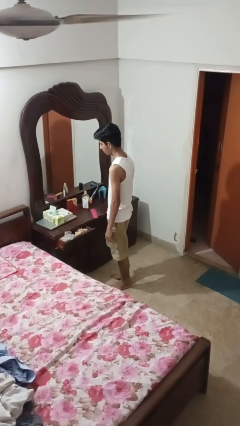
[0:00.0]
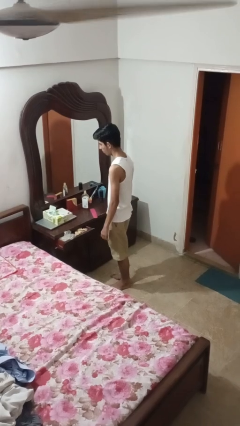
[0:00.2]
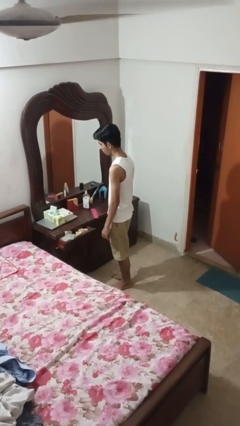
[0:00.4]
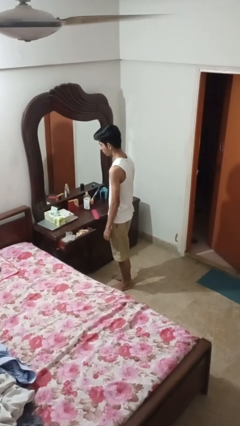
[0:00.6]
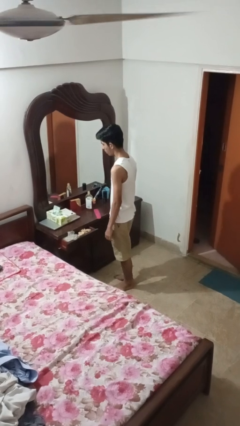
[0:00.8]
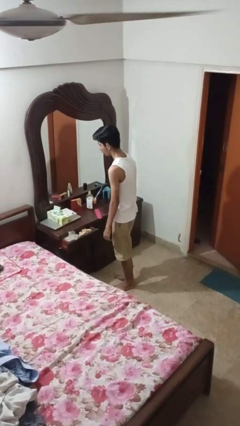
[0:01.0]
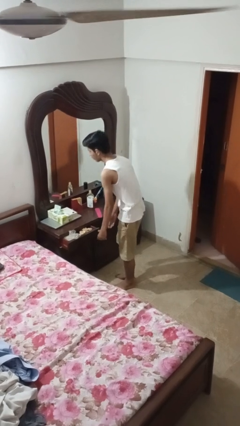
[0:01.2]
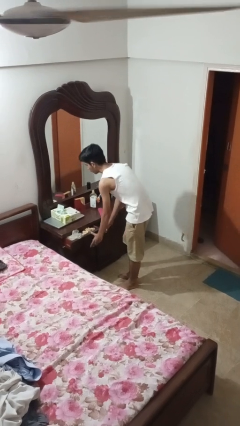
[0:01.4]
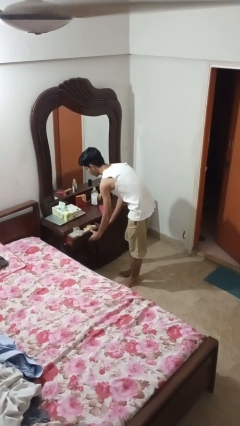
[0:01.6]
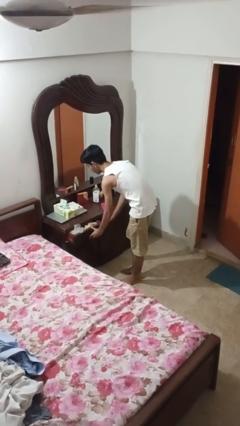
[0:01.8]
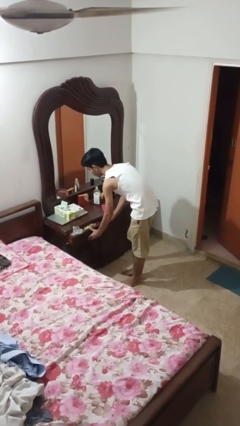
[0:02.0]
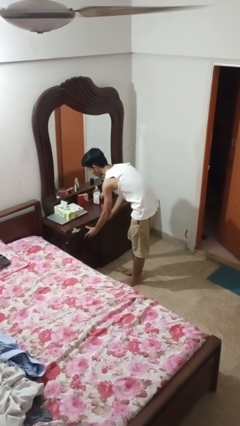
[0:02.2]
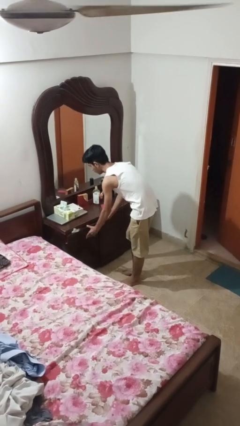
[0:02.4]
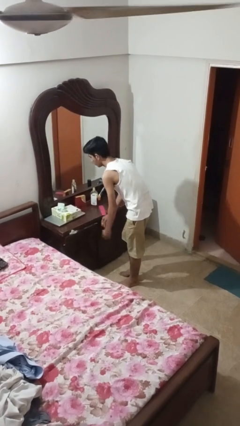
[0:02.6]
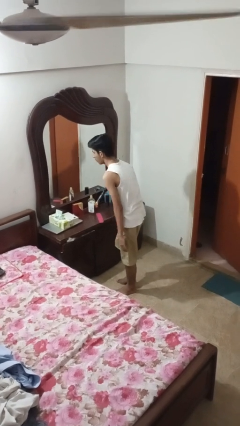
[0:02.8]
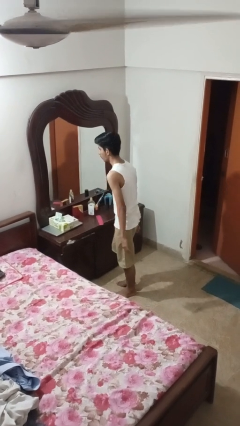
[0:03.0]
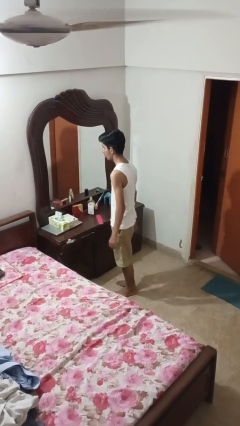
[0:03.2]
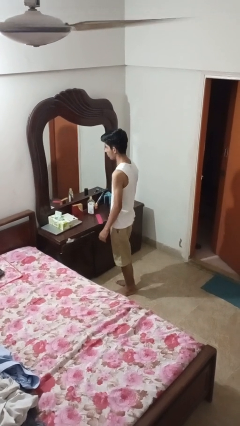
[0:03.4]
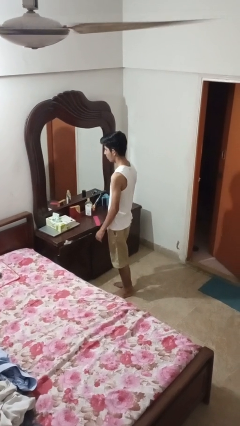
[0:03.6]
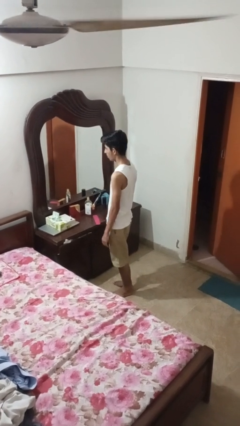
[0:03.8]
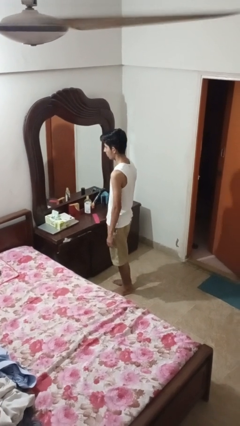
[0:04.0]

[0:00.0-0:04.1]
person closes dresser drawer

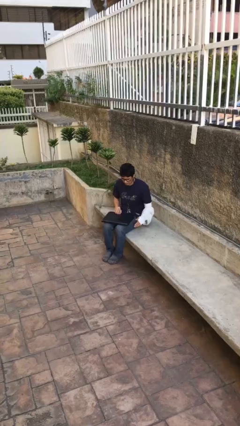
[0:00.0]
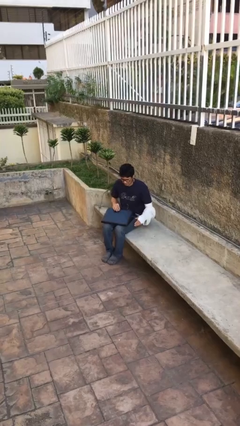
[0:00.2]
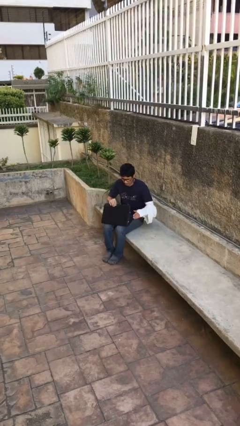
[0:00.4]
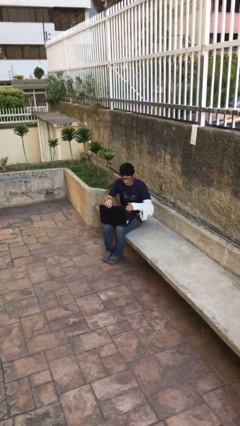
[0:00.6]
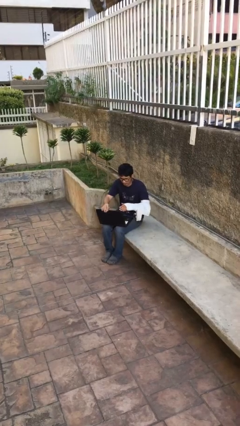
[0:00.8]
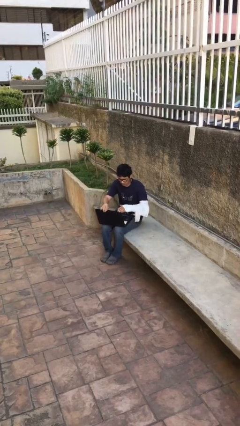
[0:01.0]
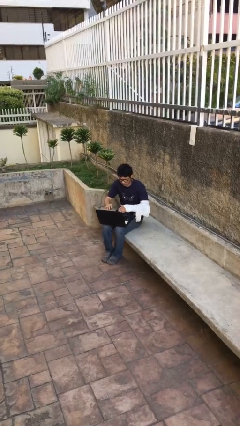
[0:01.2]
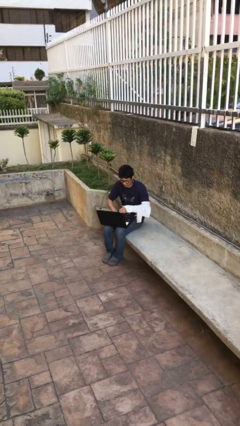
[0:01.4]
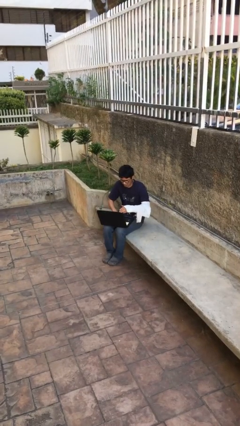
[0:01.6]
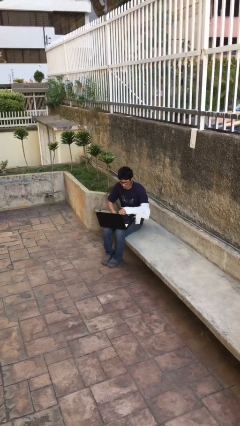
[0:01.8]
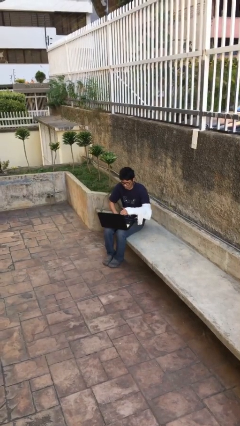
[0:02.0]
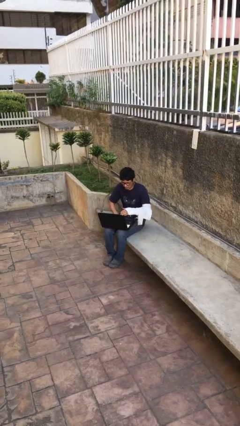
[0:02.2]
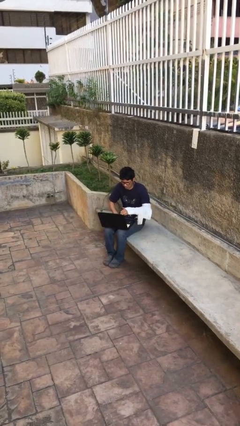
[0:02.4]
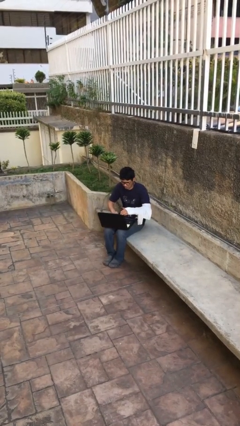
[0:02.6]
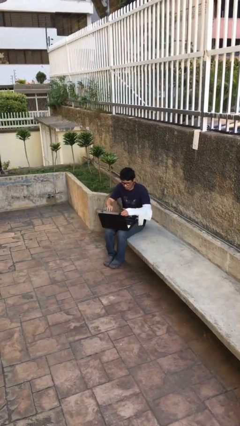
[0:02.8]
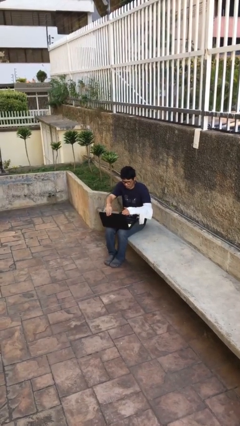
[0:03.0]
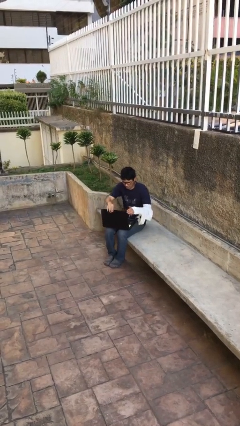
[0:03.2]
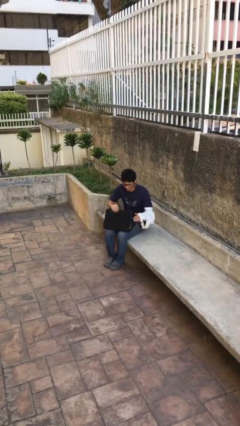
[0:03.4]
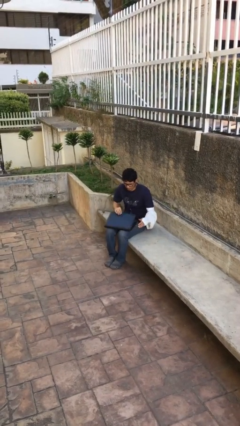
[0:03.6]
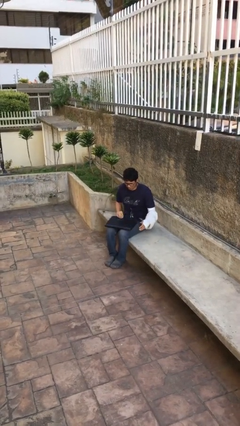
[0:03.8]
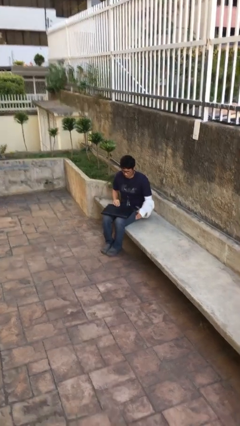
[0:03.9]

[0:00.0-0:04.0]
person interacts with laptop

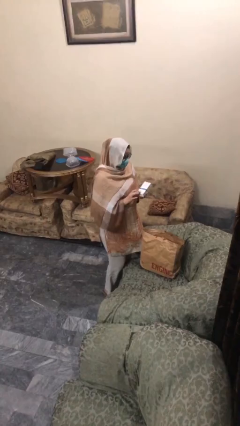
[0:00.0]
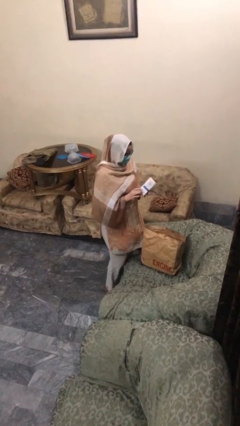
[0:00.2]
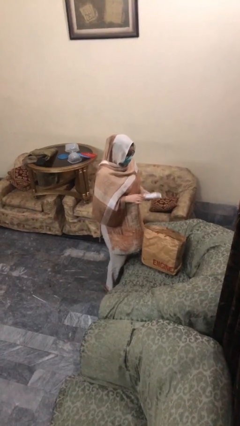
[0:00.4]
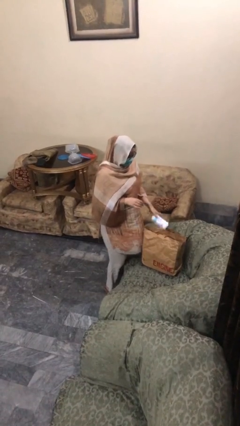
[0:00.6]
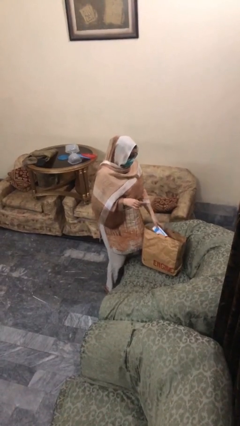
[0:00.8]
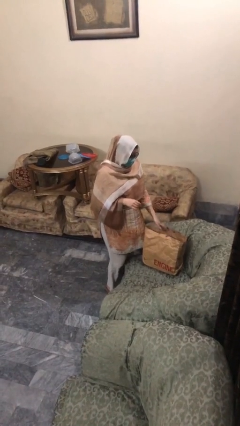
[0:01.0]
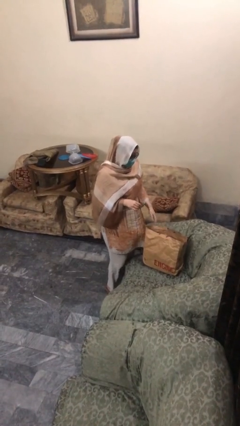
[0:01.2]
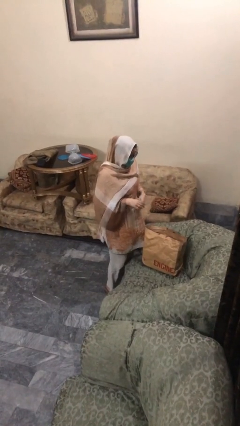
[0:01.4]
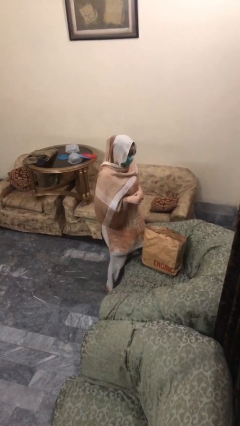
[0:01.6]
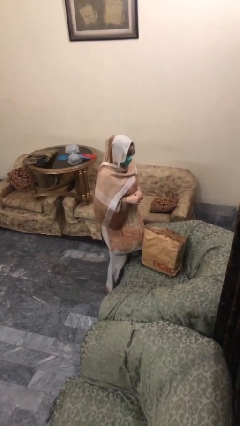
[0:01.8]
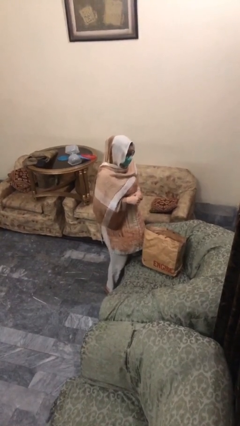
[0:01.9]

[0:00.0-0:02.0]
person puts object into bag

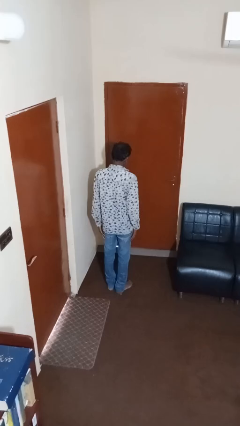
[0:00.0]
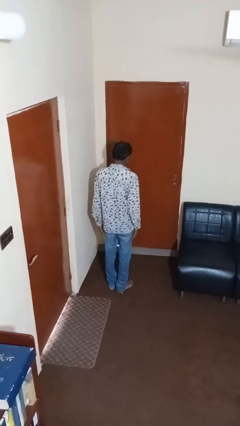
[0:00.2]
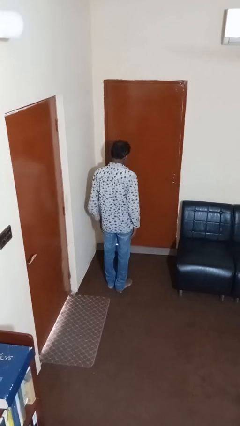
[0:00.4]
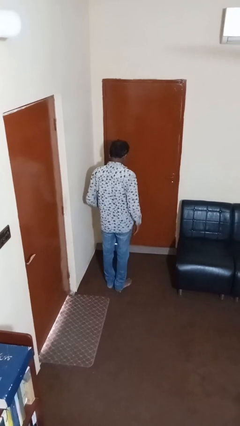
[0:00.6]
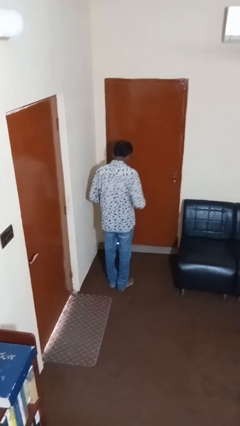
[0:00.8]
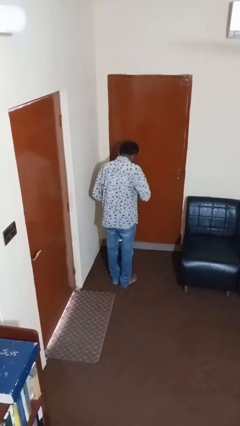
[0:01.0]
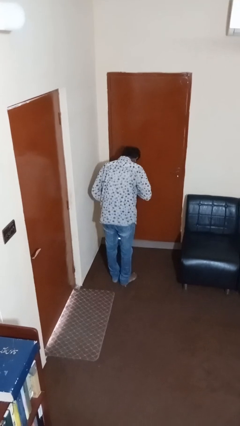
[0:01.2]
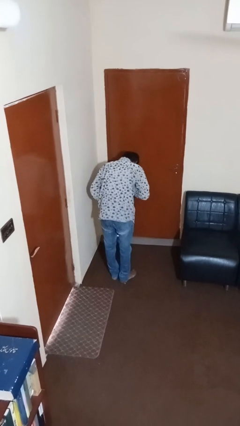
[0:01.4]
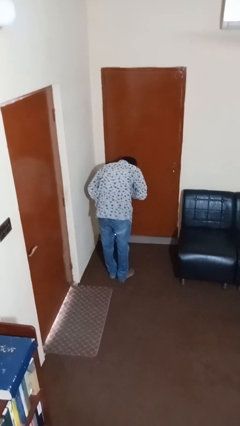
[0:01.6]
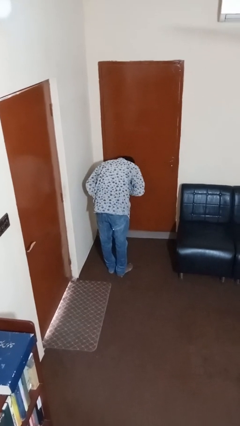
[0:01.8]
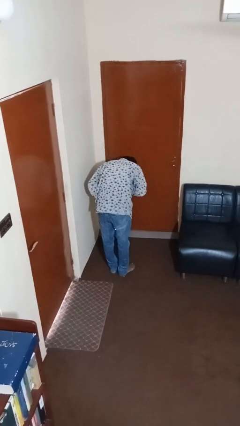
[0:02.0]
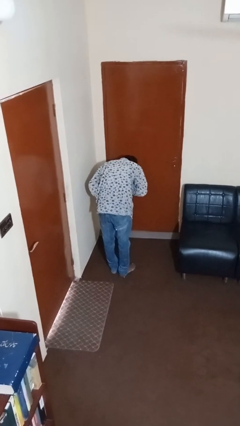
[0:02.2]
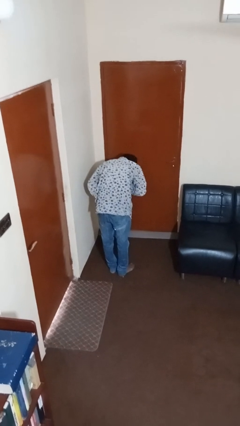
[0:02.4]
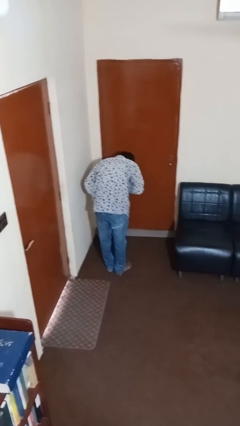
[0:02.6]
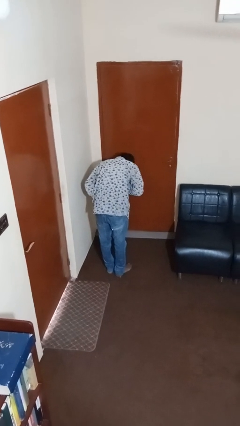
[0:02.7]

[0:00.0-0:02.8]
person bows

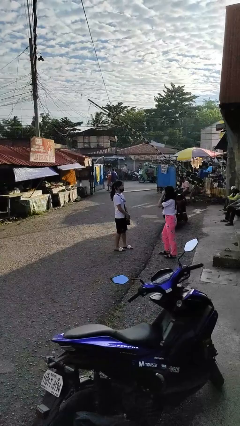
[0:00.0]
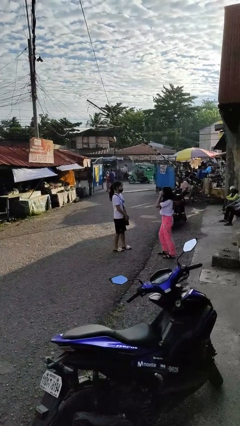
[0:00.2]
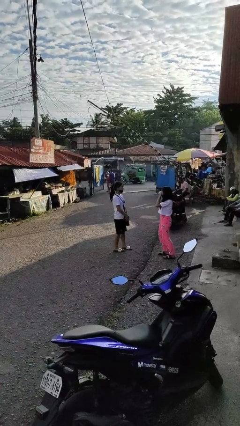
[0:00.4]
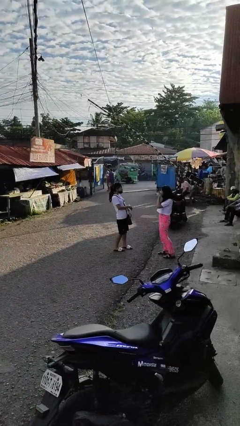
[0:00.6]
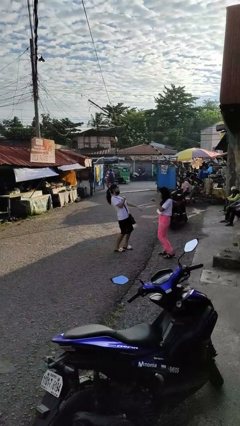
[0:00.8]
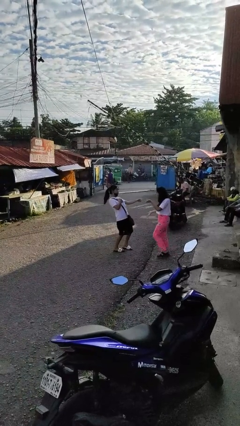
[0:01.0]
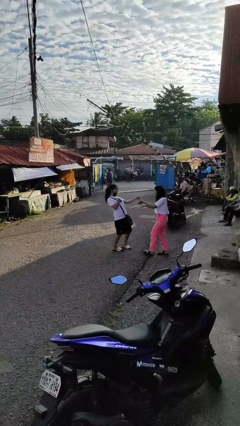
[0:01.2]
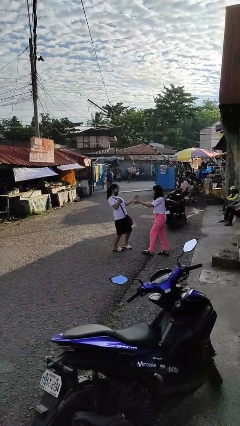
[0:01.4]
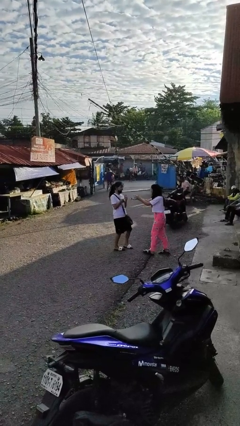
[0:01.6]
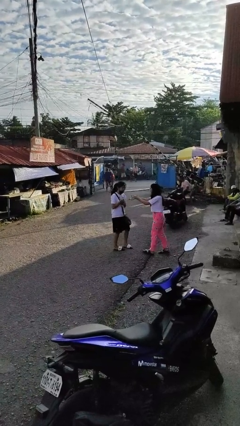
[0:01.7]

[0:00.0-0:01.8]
person laughs with person

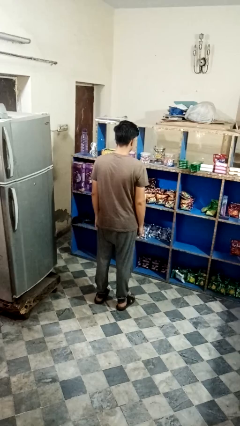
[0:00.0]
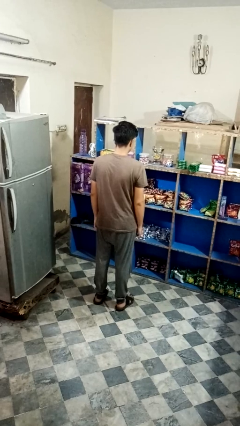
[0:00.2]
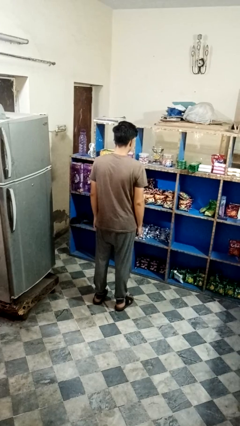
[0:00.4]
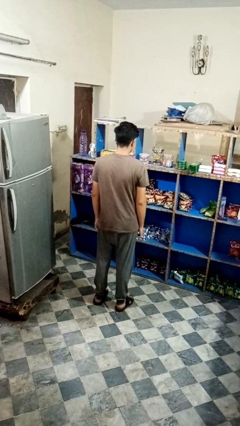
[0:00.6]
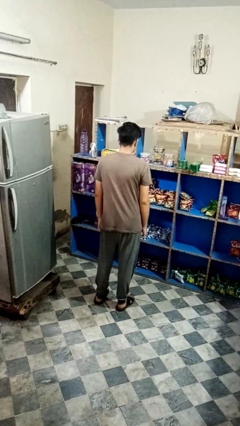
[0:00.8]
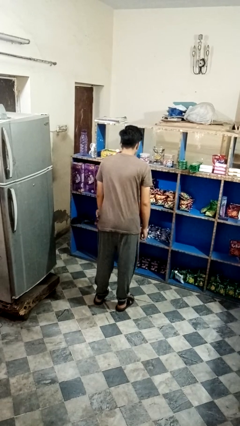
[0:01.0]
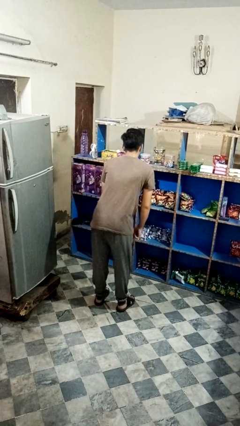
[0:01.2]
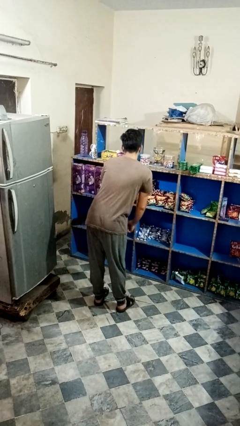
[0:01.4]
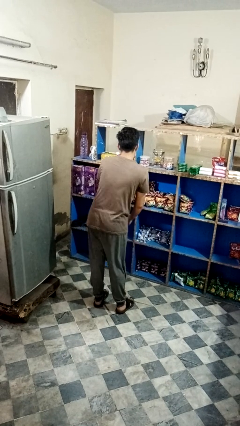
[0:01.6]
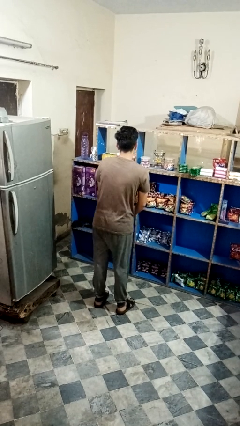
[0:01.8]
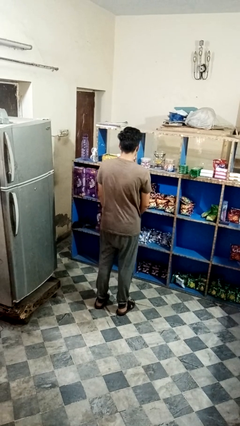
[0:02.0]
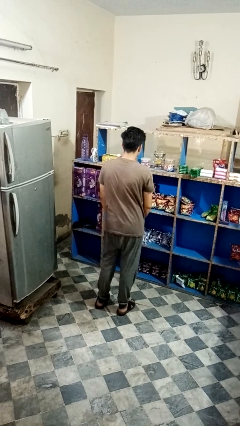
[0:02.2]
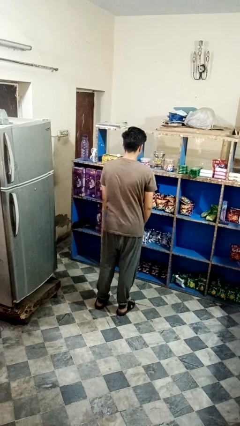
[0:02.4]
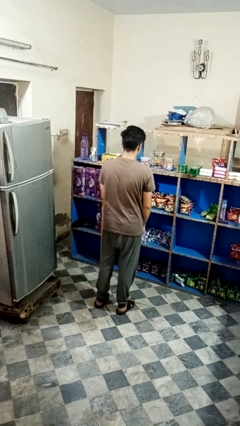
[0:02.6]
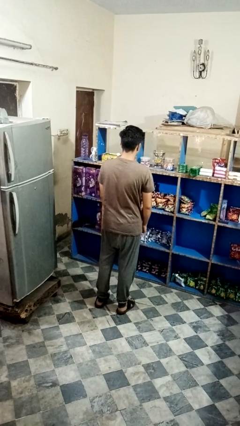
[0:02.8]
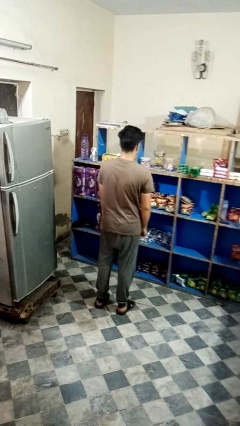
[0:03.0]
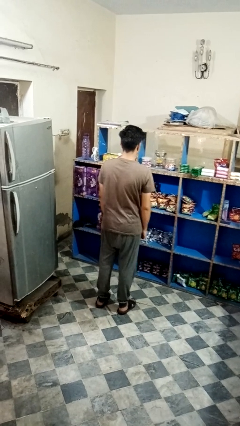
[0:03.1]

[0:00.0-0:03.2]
person wiggles hips
